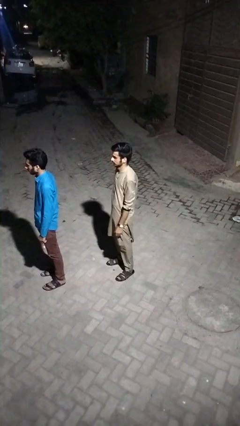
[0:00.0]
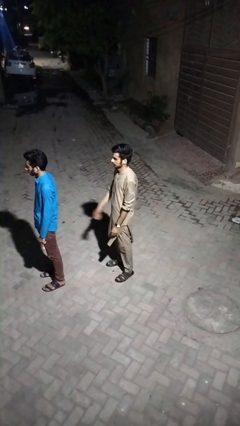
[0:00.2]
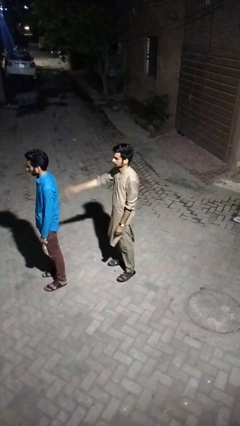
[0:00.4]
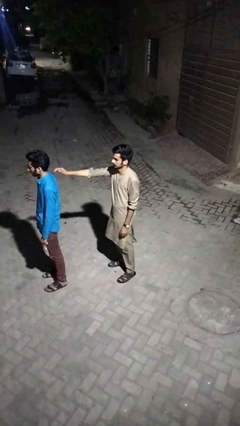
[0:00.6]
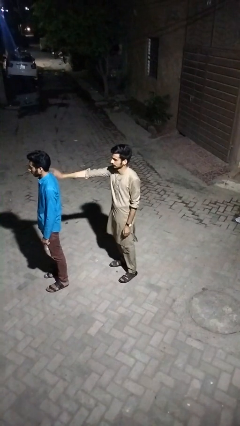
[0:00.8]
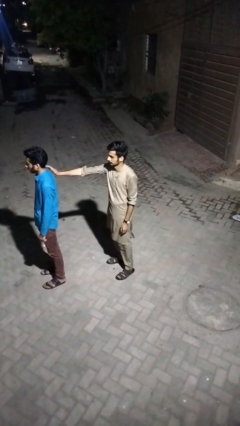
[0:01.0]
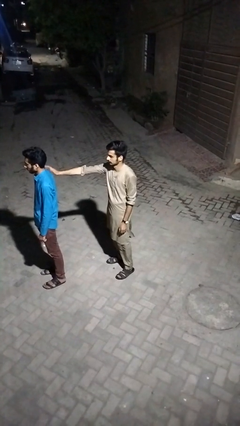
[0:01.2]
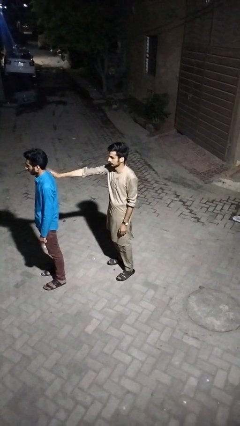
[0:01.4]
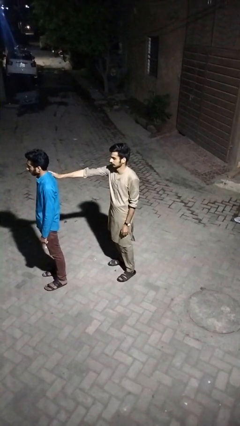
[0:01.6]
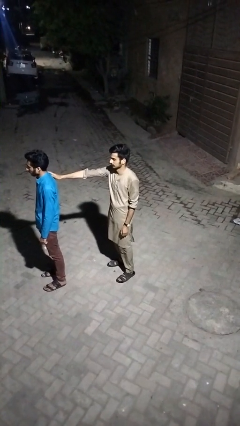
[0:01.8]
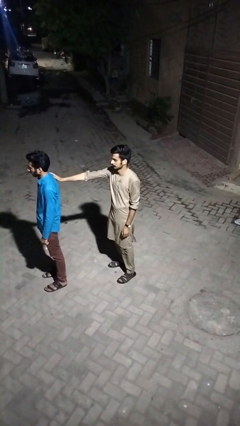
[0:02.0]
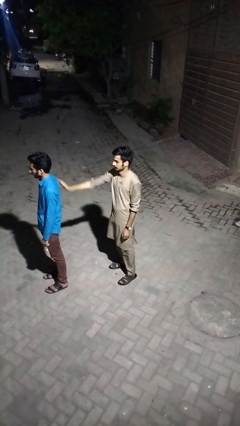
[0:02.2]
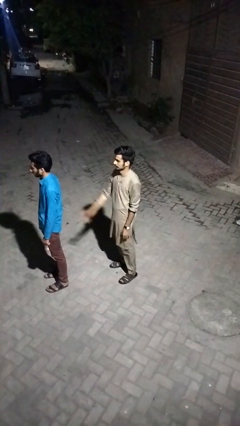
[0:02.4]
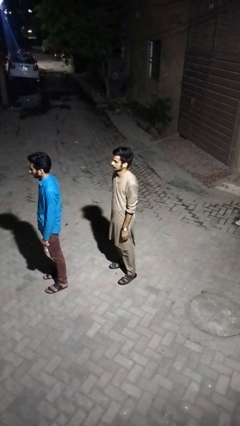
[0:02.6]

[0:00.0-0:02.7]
person touches back of person

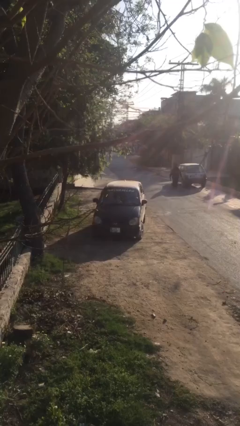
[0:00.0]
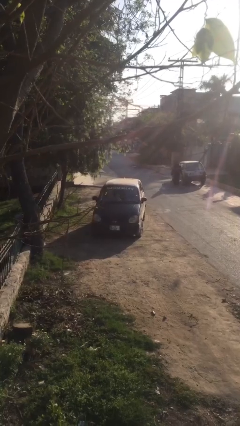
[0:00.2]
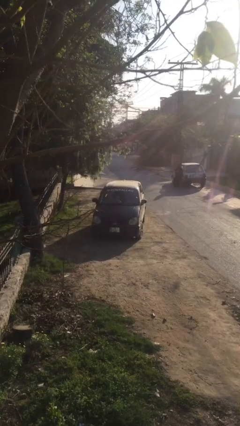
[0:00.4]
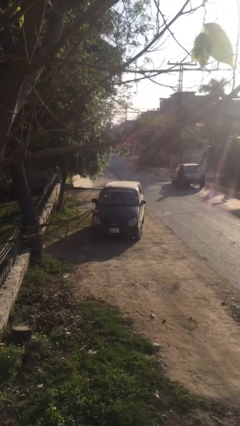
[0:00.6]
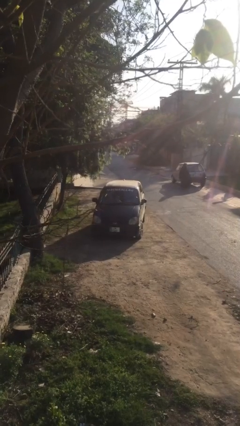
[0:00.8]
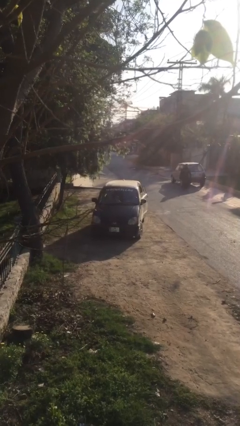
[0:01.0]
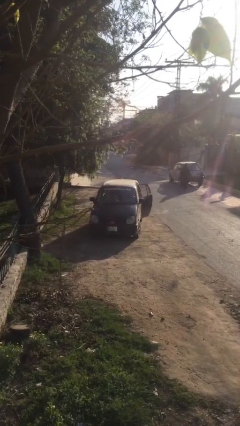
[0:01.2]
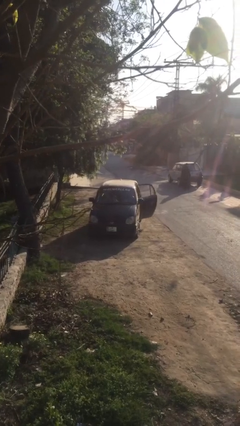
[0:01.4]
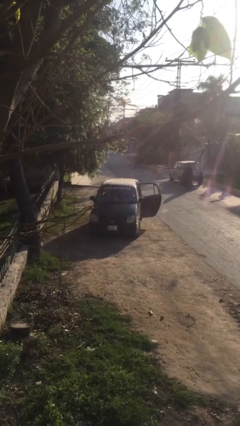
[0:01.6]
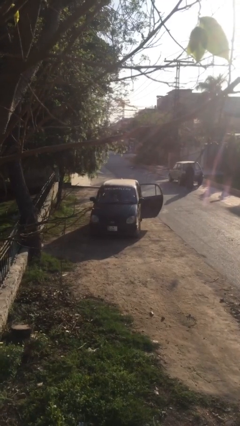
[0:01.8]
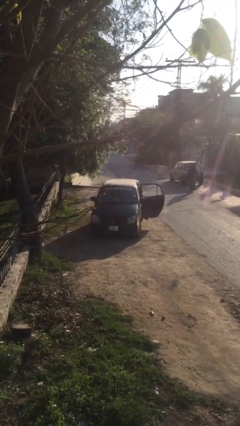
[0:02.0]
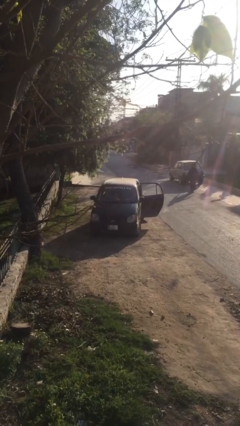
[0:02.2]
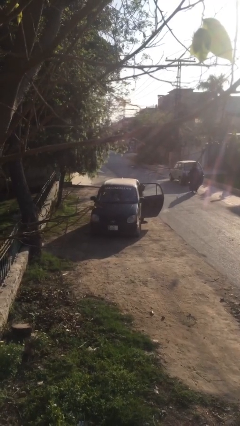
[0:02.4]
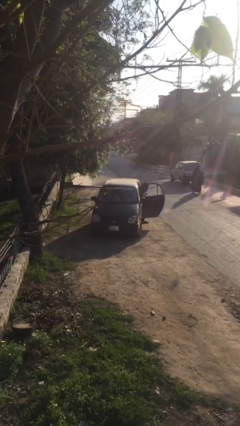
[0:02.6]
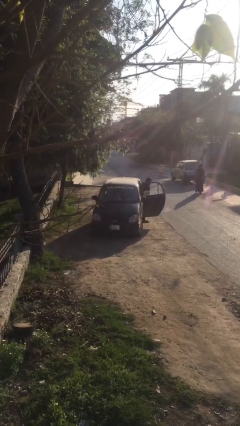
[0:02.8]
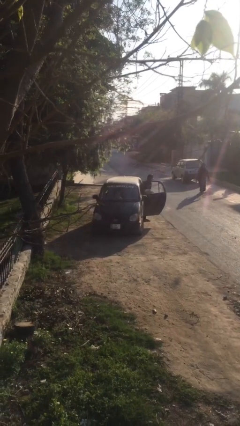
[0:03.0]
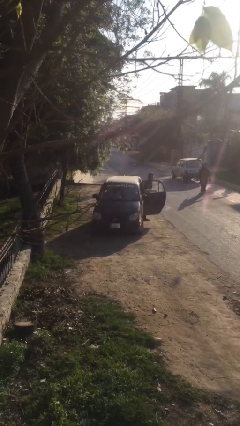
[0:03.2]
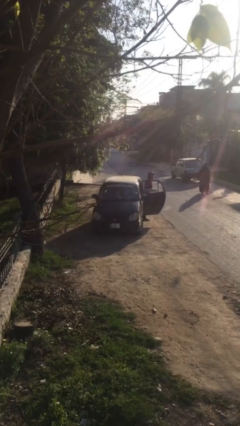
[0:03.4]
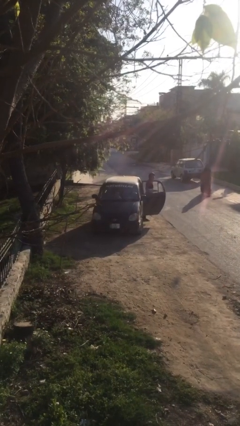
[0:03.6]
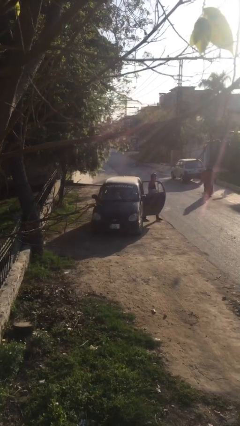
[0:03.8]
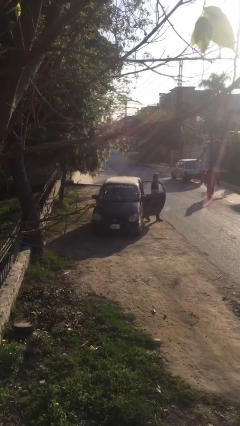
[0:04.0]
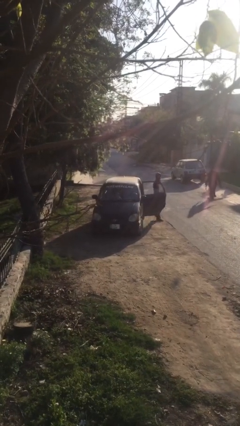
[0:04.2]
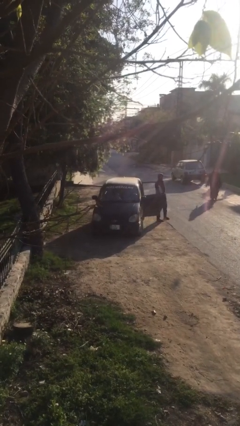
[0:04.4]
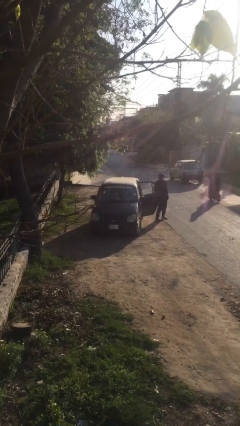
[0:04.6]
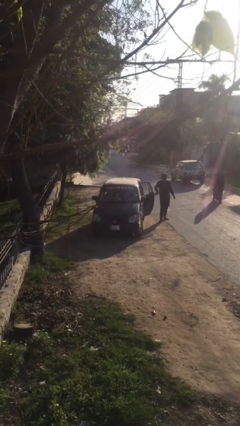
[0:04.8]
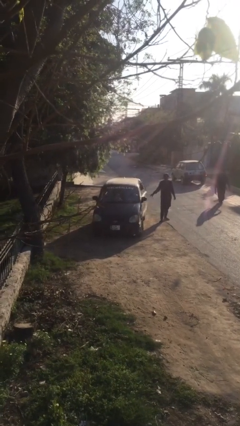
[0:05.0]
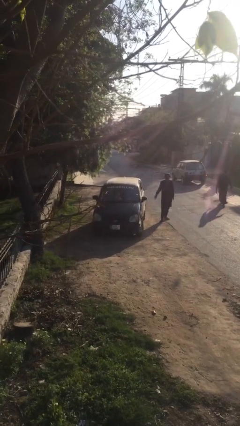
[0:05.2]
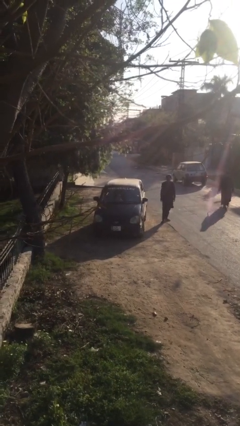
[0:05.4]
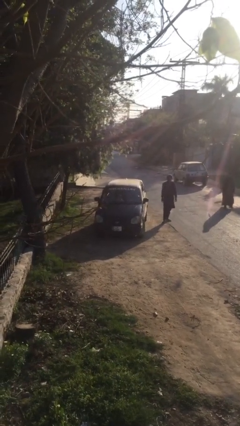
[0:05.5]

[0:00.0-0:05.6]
car drops off person

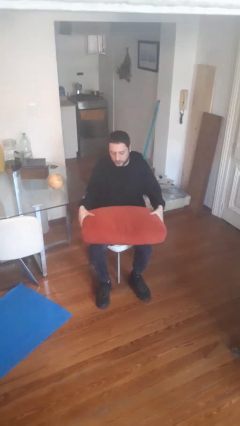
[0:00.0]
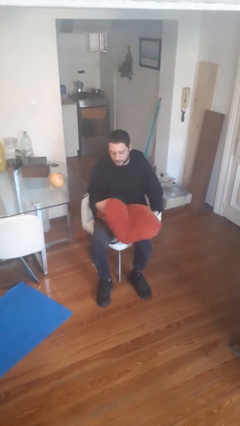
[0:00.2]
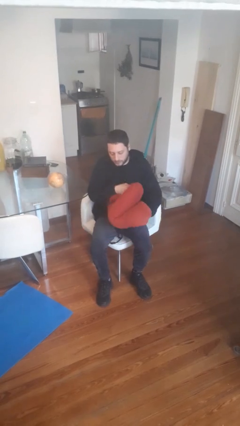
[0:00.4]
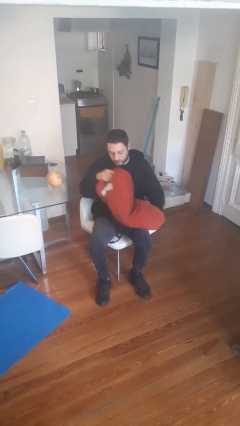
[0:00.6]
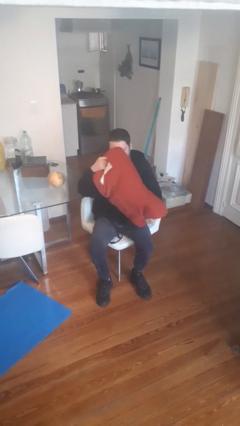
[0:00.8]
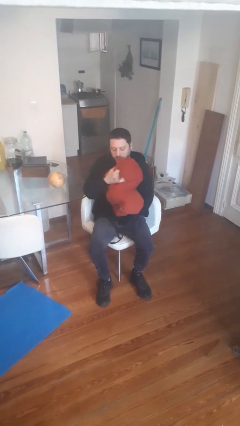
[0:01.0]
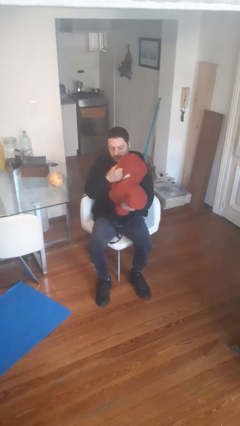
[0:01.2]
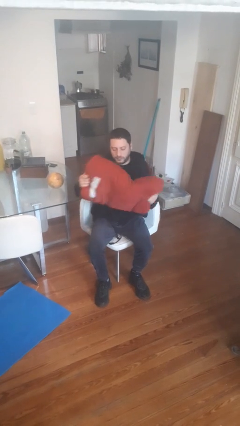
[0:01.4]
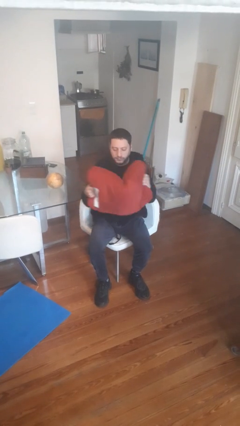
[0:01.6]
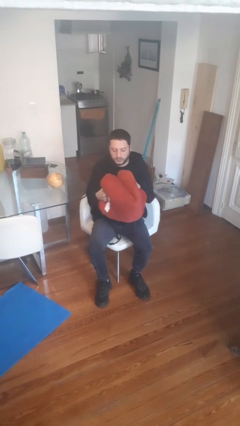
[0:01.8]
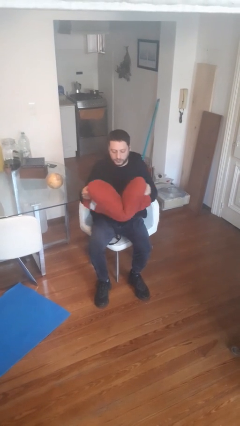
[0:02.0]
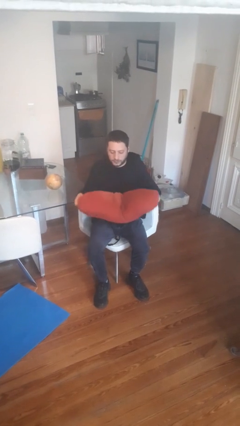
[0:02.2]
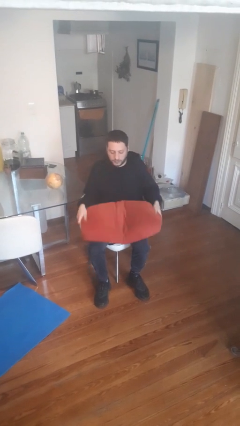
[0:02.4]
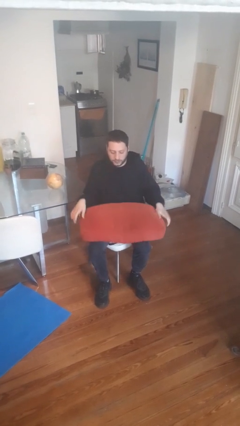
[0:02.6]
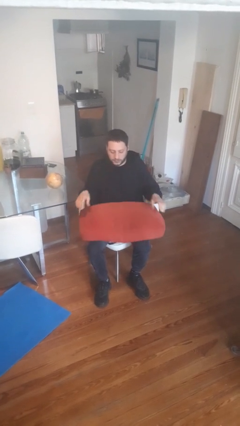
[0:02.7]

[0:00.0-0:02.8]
person squeezes object

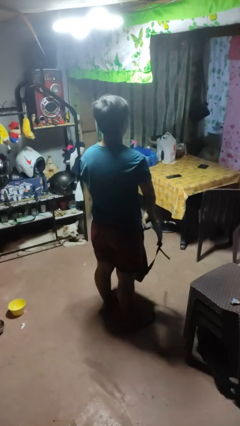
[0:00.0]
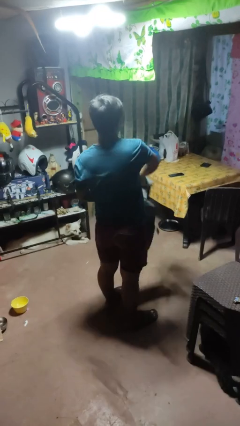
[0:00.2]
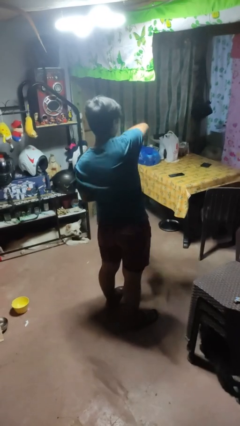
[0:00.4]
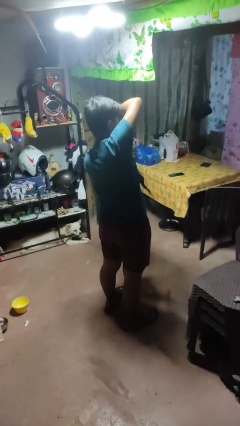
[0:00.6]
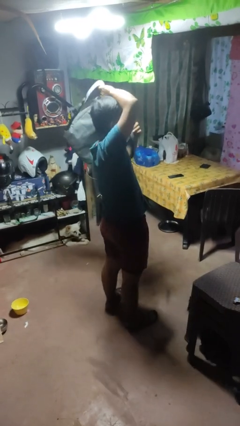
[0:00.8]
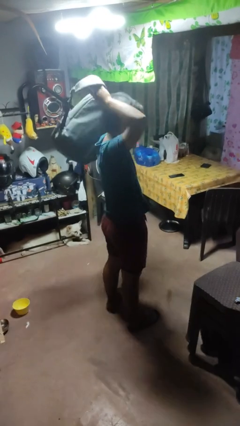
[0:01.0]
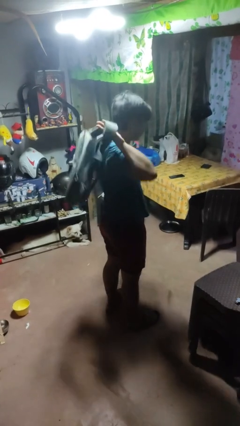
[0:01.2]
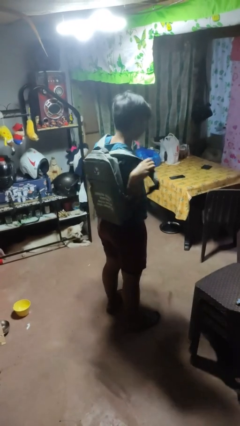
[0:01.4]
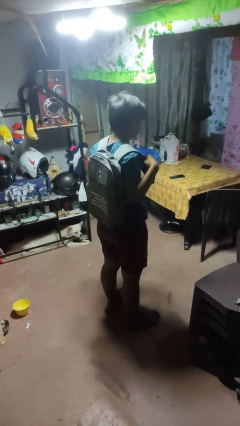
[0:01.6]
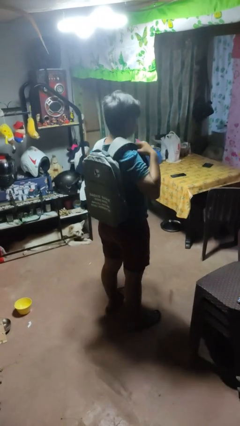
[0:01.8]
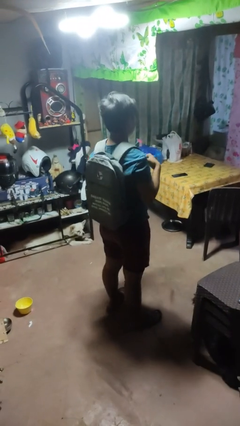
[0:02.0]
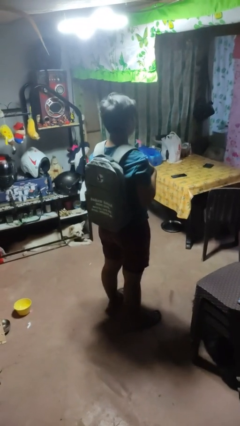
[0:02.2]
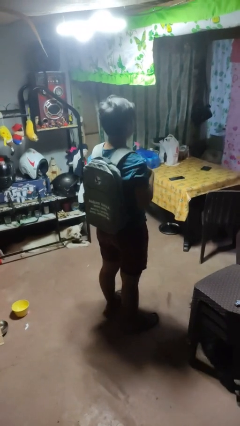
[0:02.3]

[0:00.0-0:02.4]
person puts on backpack

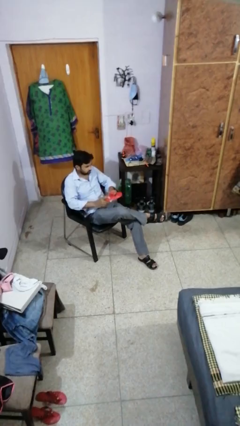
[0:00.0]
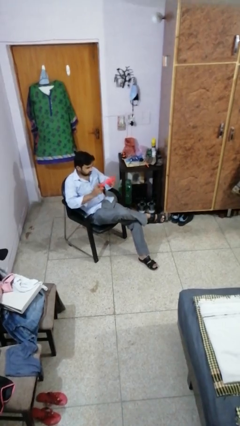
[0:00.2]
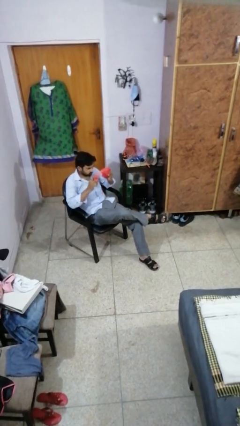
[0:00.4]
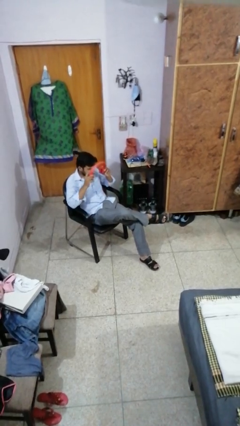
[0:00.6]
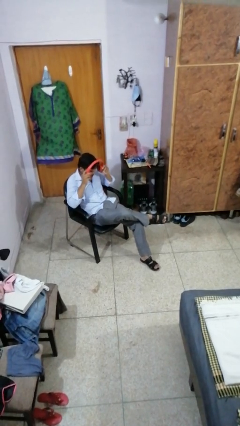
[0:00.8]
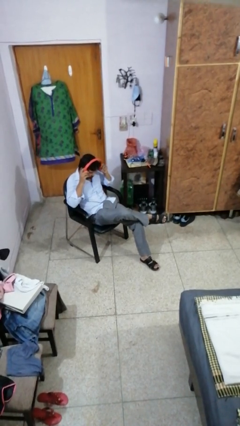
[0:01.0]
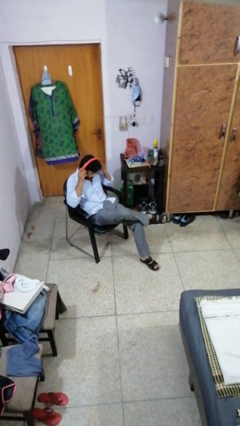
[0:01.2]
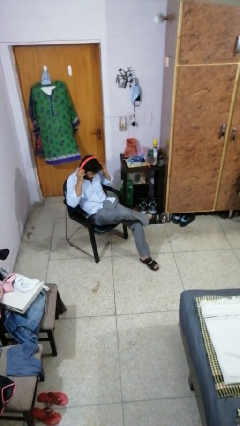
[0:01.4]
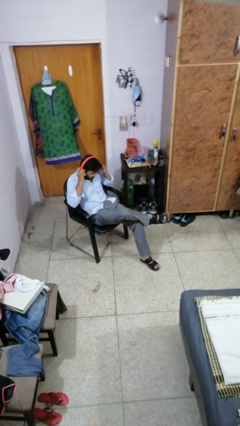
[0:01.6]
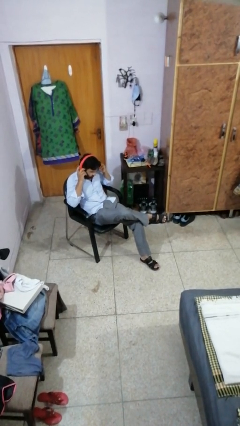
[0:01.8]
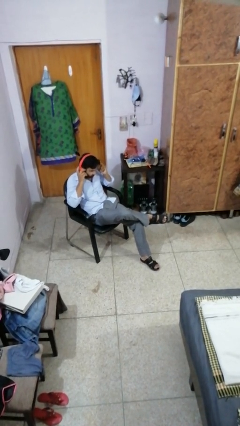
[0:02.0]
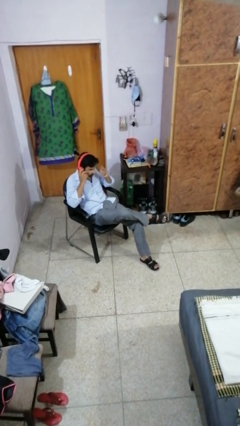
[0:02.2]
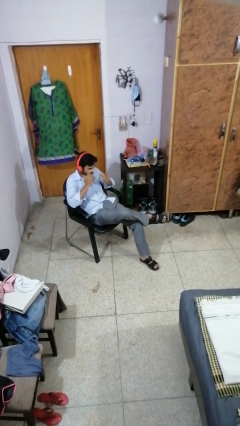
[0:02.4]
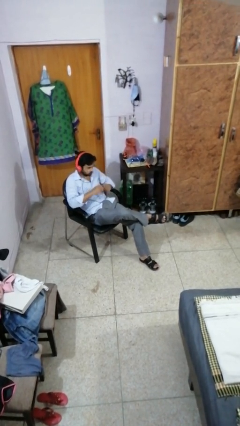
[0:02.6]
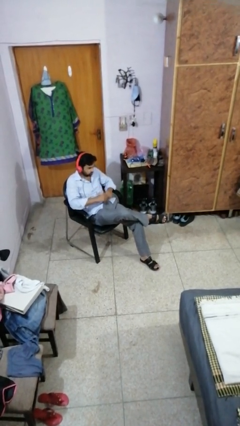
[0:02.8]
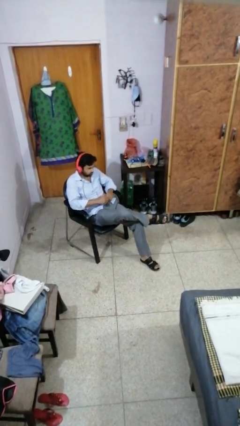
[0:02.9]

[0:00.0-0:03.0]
person puts on headphones

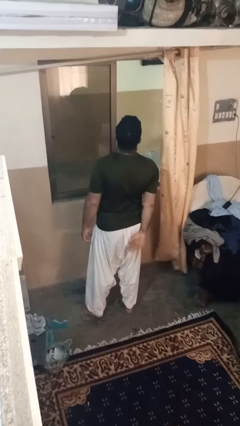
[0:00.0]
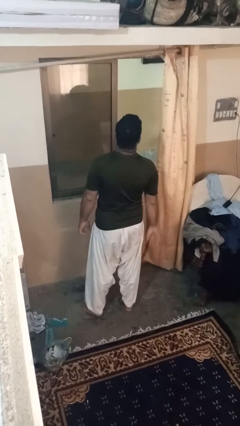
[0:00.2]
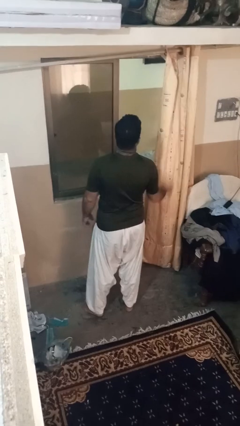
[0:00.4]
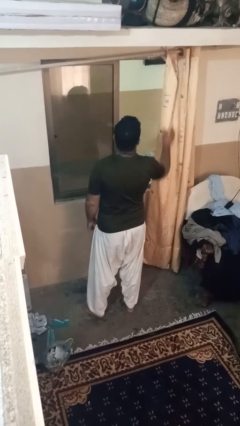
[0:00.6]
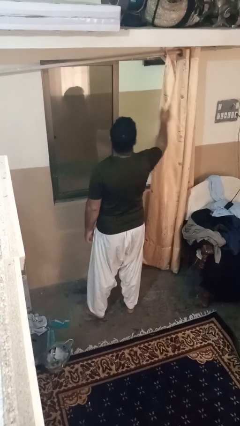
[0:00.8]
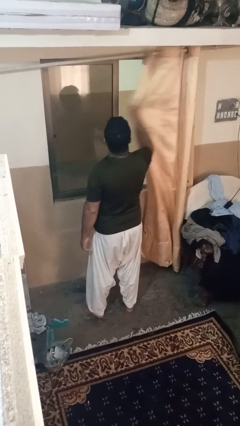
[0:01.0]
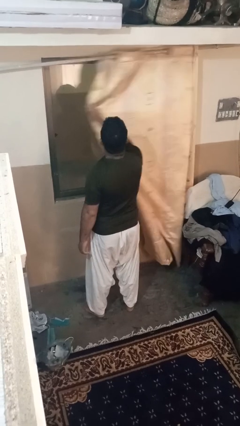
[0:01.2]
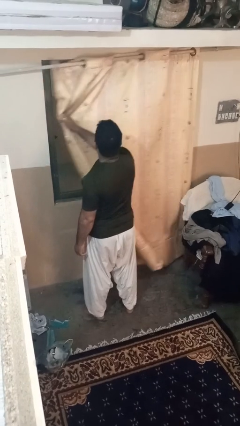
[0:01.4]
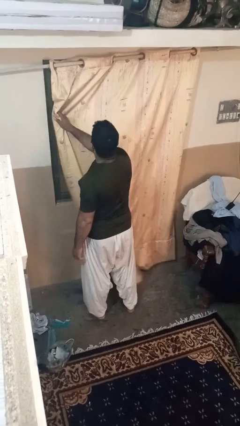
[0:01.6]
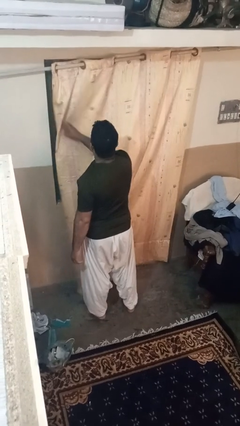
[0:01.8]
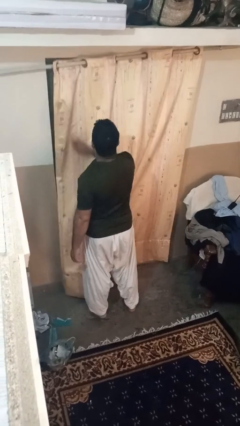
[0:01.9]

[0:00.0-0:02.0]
person closes curtains
